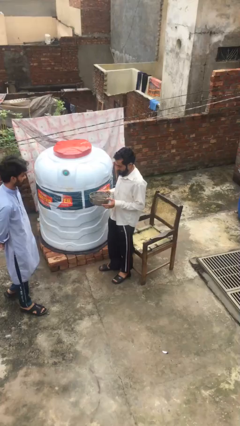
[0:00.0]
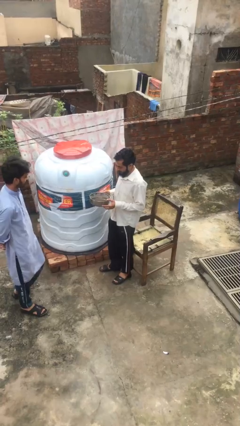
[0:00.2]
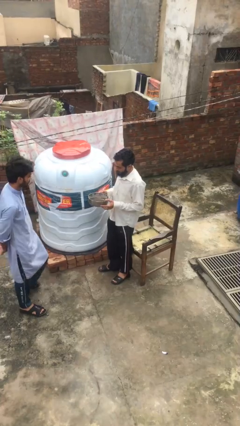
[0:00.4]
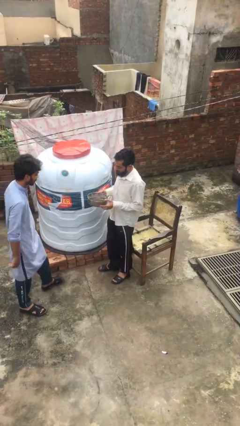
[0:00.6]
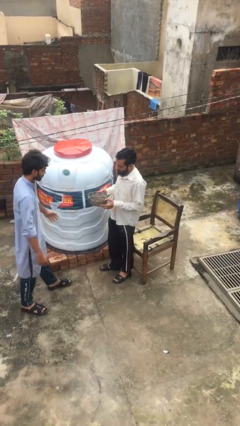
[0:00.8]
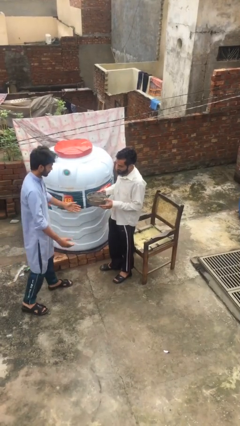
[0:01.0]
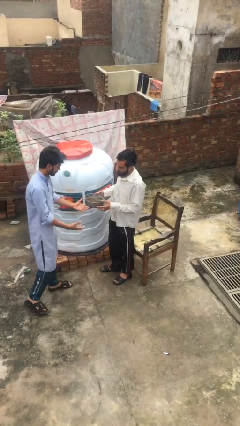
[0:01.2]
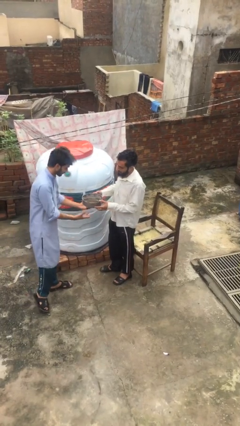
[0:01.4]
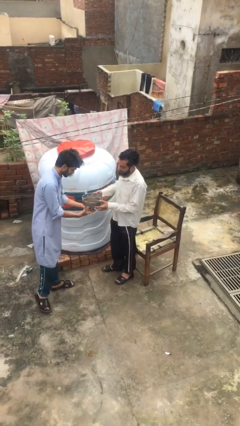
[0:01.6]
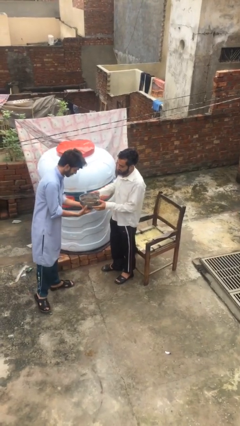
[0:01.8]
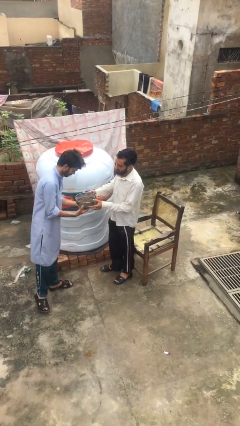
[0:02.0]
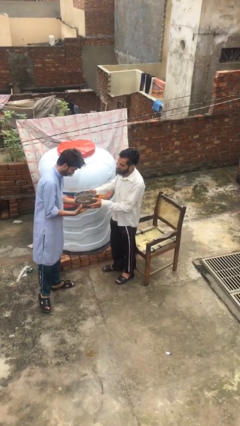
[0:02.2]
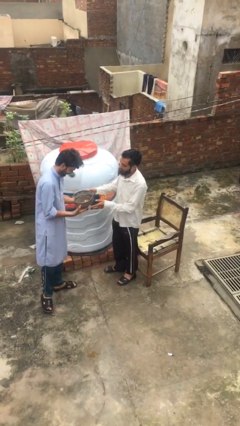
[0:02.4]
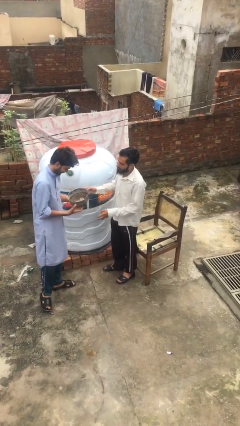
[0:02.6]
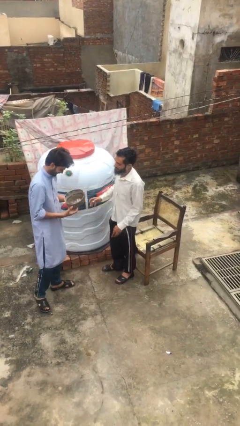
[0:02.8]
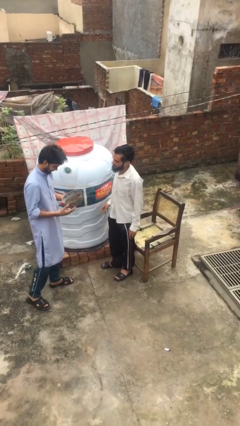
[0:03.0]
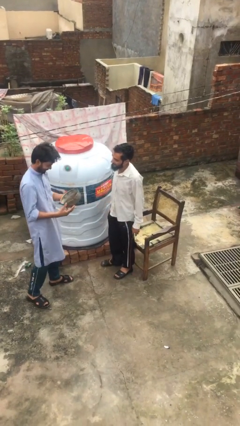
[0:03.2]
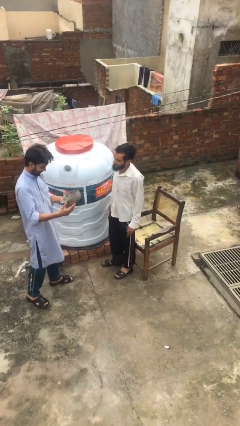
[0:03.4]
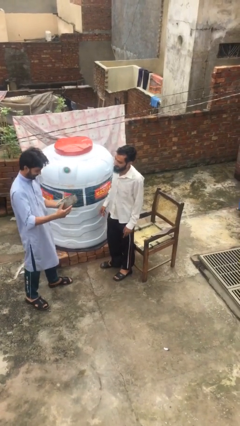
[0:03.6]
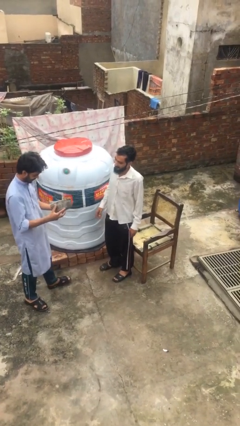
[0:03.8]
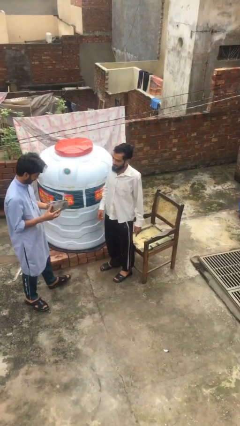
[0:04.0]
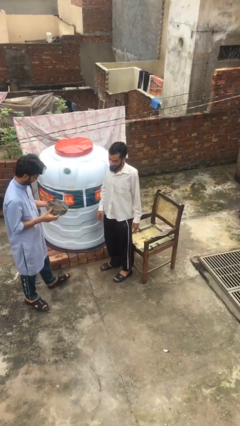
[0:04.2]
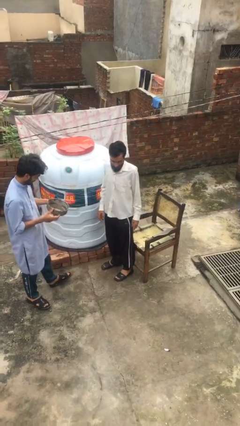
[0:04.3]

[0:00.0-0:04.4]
person transfers object to person

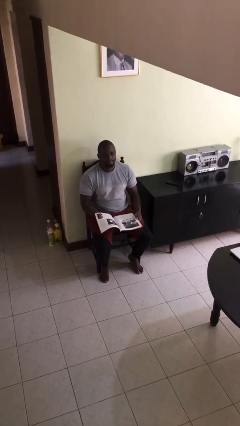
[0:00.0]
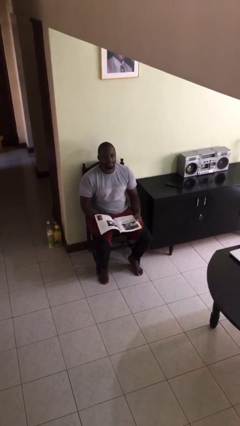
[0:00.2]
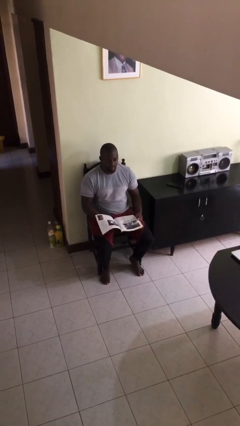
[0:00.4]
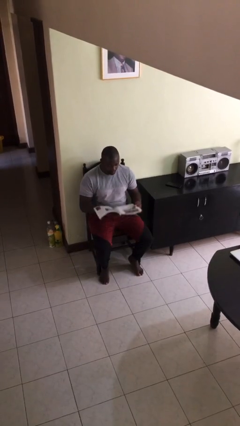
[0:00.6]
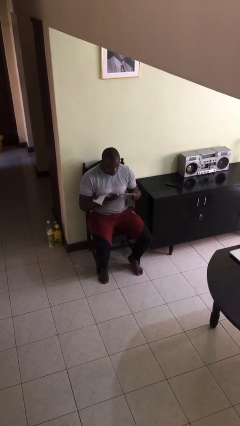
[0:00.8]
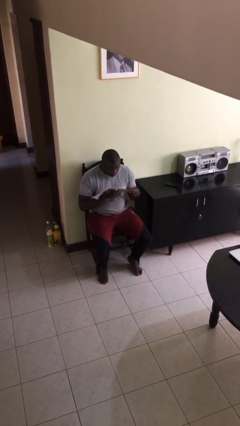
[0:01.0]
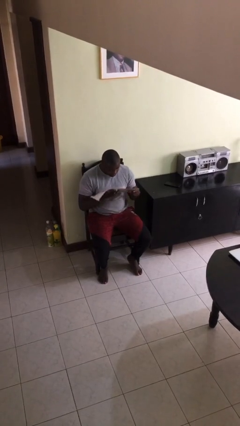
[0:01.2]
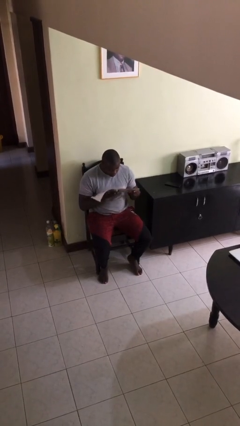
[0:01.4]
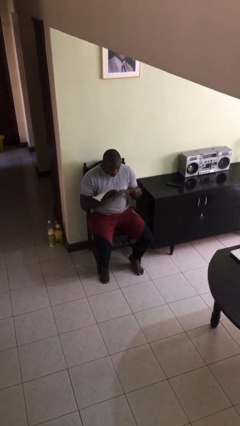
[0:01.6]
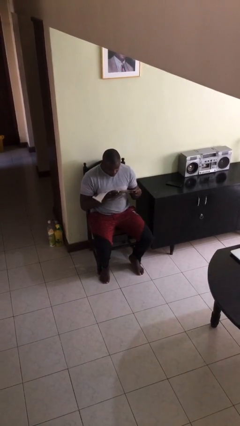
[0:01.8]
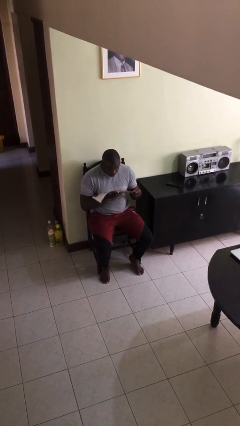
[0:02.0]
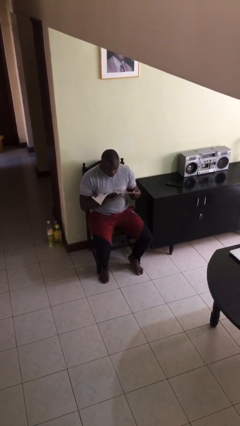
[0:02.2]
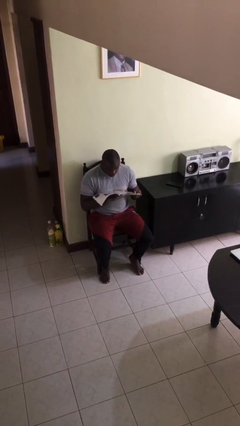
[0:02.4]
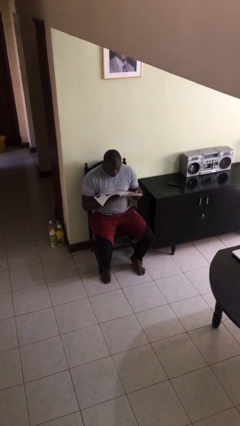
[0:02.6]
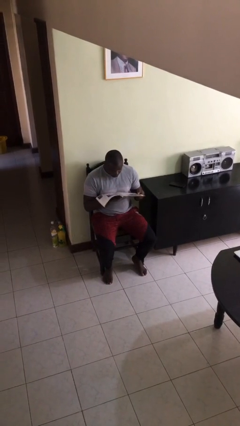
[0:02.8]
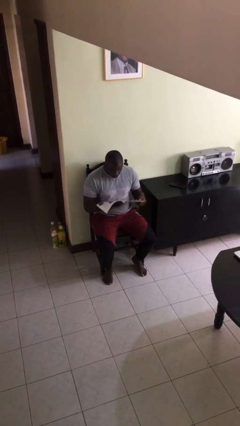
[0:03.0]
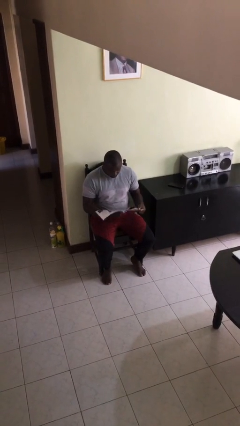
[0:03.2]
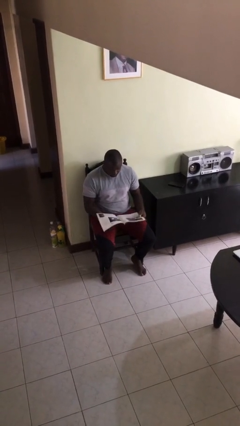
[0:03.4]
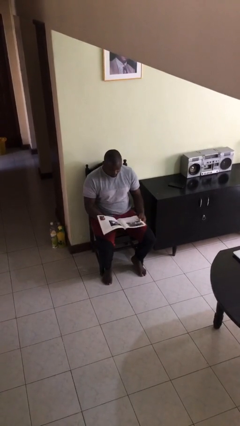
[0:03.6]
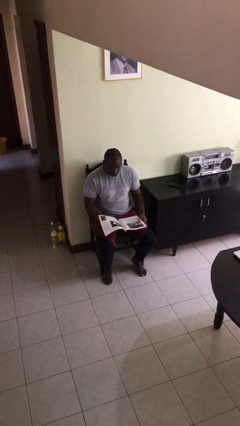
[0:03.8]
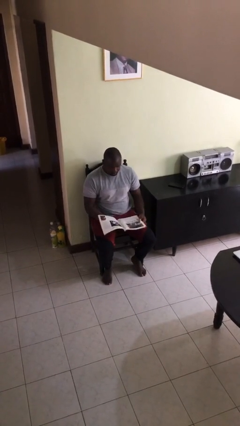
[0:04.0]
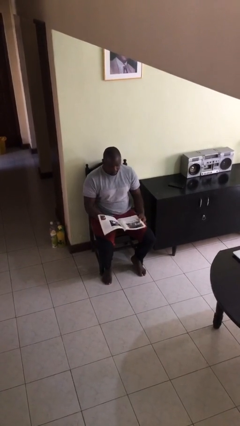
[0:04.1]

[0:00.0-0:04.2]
person reads document

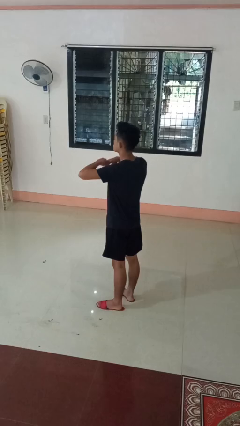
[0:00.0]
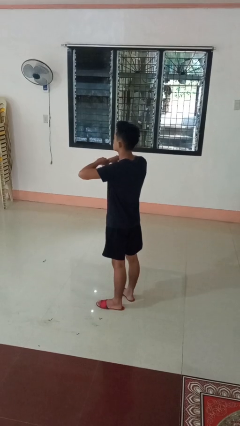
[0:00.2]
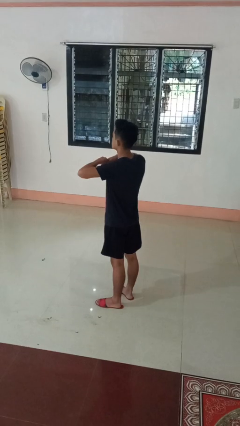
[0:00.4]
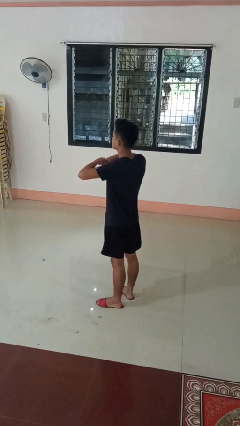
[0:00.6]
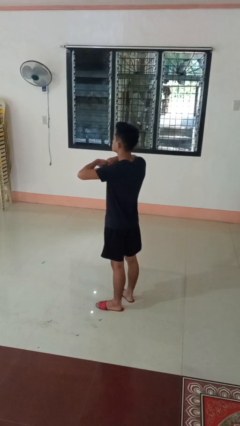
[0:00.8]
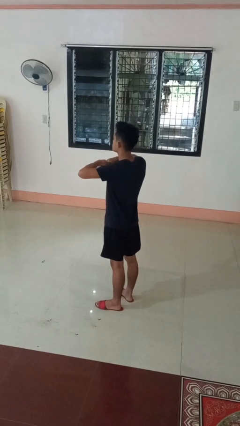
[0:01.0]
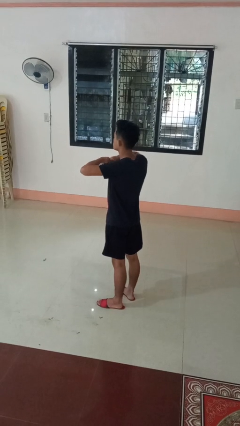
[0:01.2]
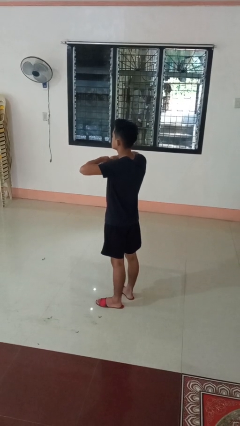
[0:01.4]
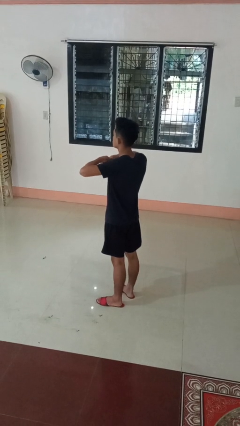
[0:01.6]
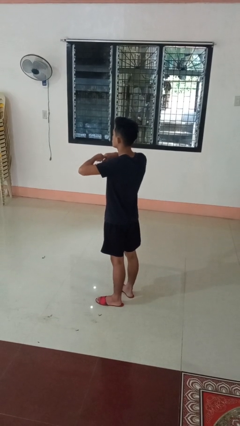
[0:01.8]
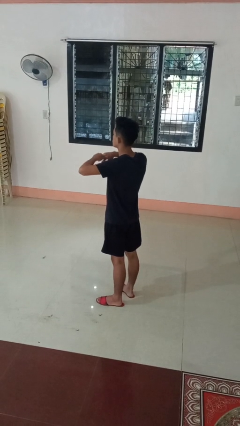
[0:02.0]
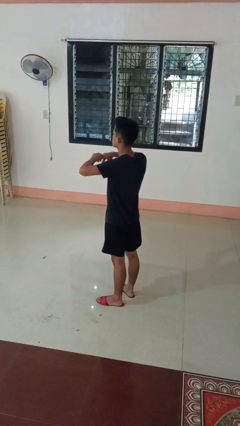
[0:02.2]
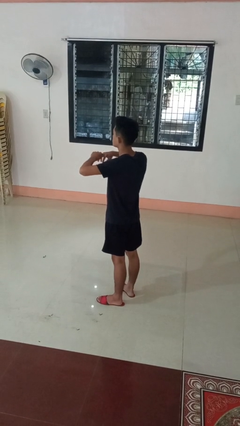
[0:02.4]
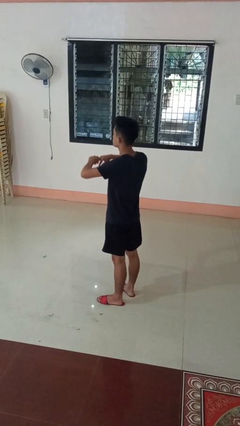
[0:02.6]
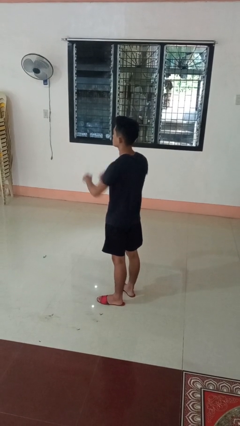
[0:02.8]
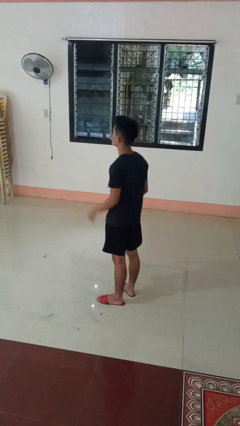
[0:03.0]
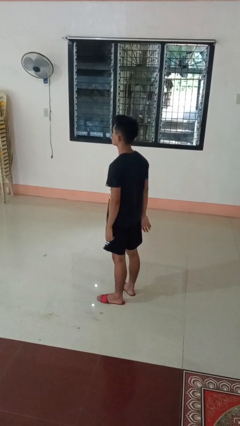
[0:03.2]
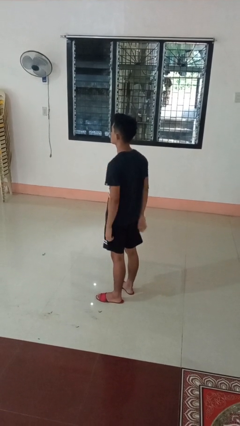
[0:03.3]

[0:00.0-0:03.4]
person cracks knuckles

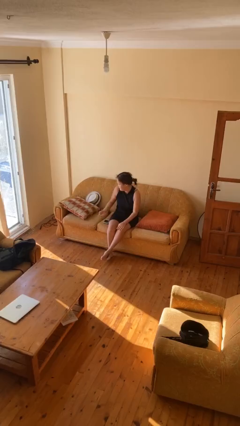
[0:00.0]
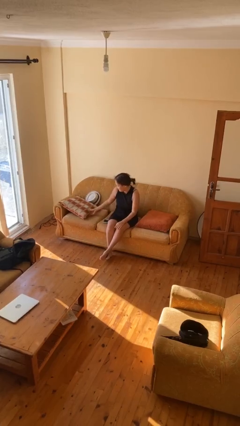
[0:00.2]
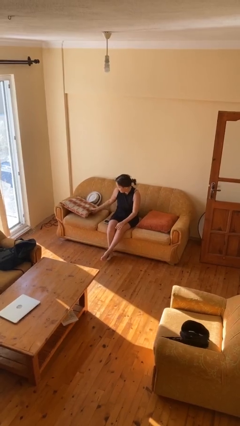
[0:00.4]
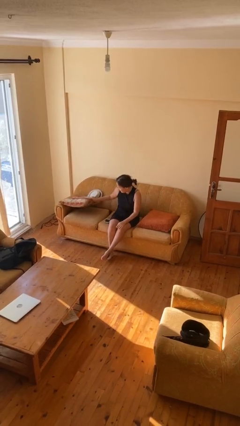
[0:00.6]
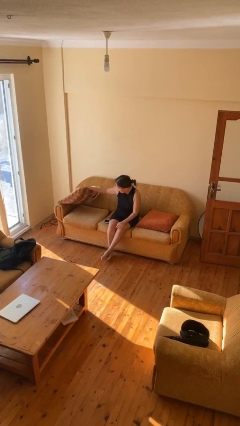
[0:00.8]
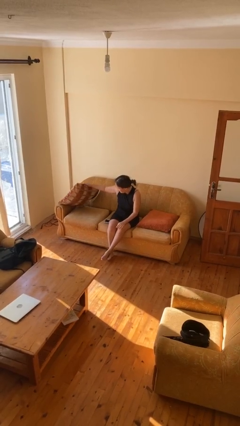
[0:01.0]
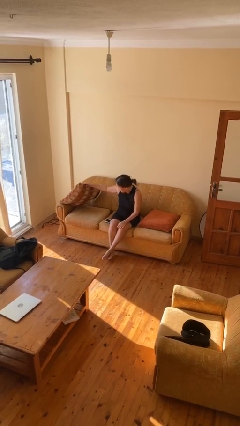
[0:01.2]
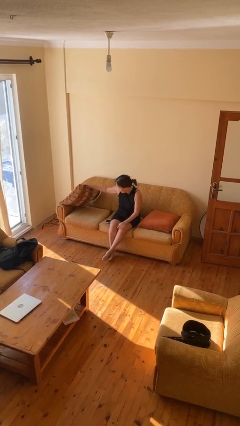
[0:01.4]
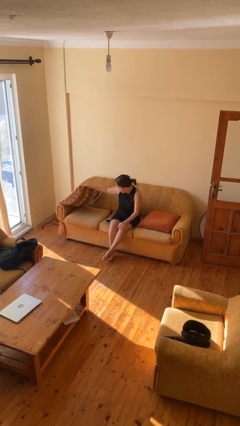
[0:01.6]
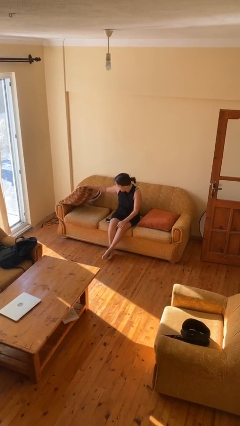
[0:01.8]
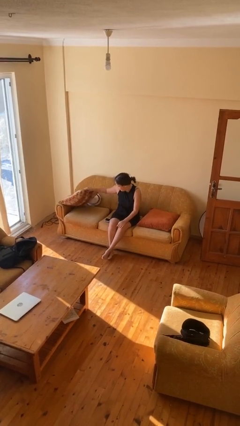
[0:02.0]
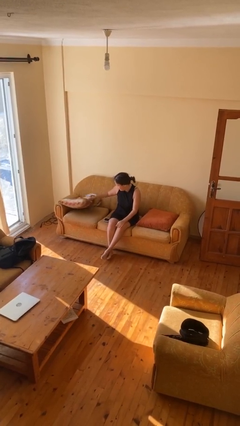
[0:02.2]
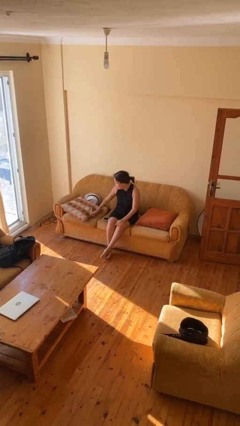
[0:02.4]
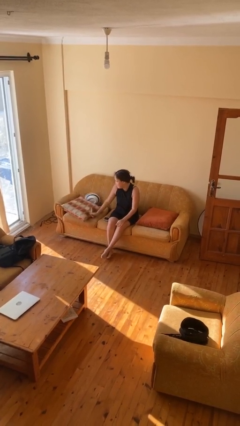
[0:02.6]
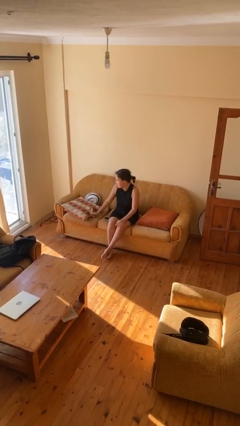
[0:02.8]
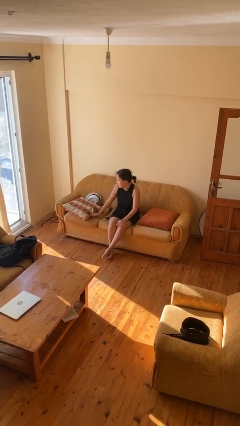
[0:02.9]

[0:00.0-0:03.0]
person searches in couch

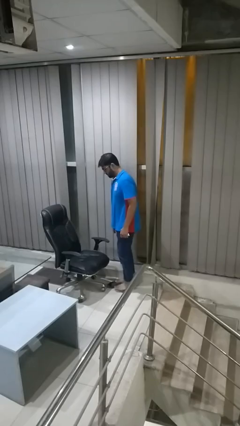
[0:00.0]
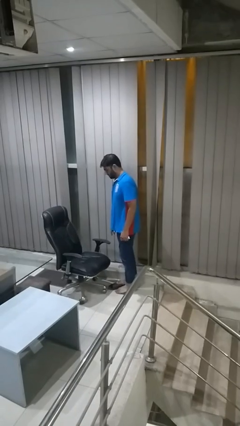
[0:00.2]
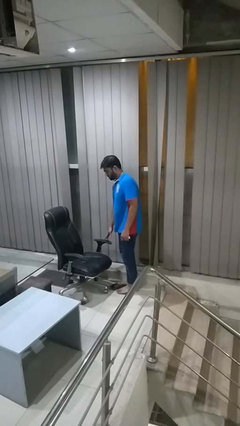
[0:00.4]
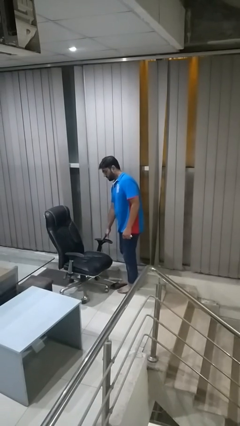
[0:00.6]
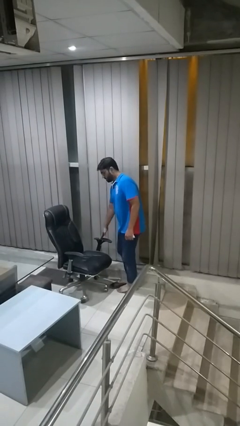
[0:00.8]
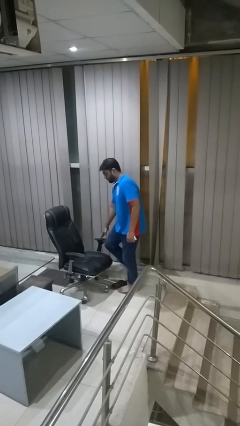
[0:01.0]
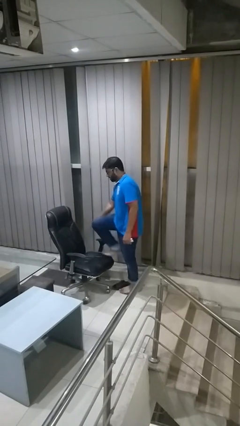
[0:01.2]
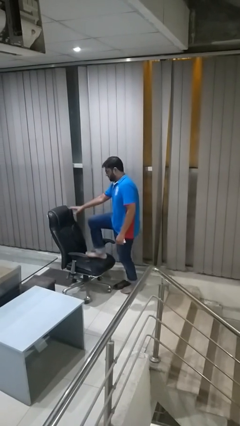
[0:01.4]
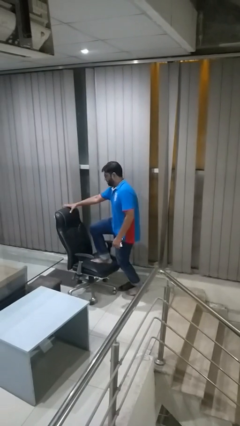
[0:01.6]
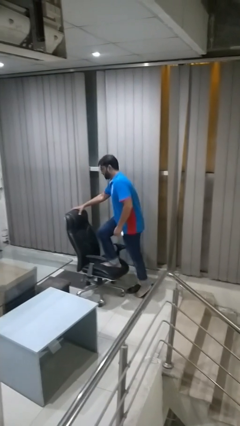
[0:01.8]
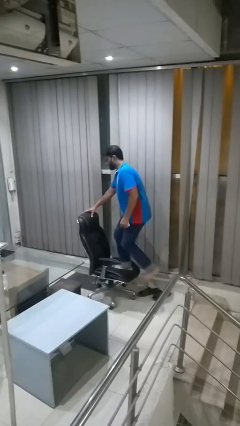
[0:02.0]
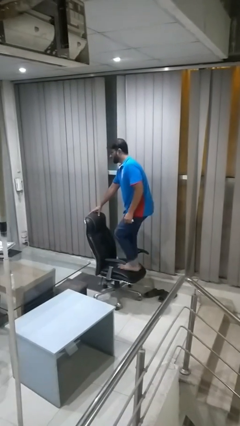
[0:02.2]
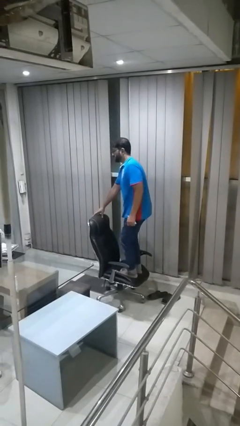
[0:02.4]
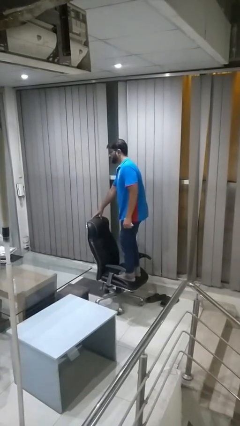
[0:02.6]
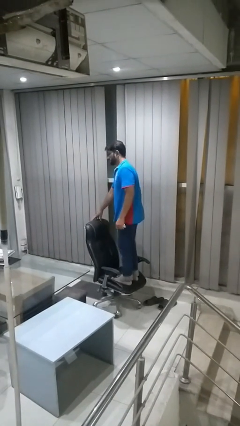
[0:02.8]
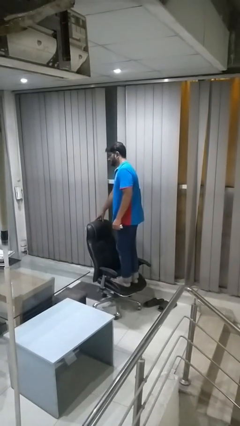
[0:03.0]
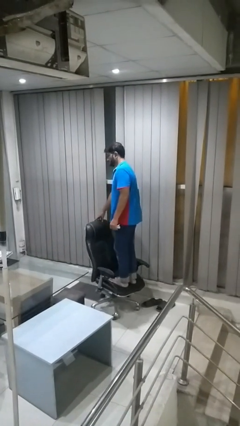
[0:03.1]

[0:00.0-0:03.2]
person climbs on chair
